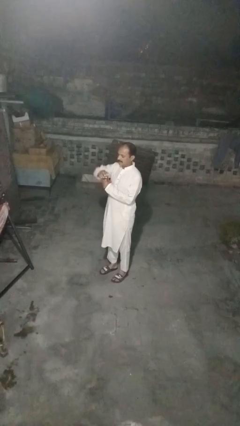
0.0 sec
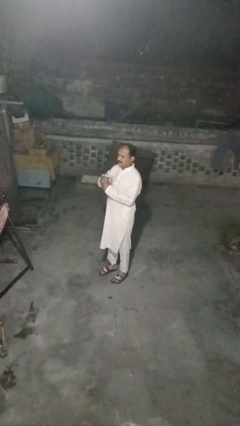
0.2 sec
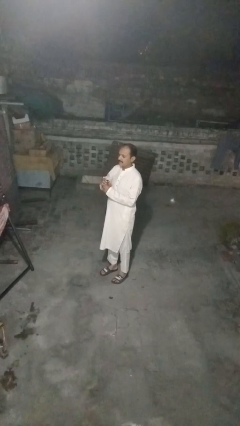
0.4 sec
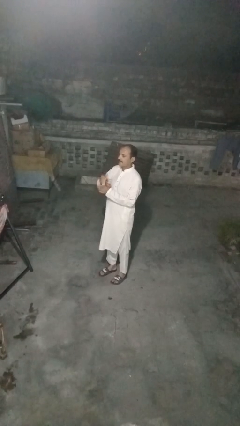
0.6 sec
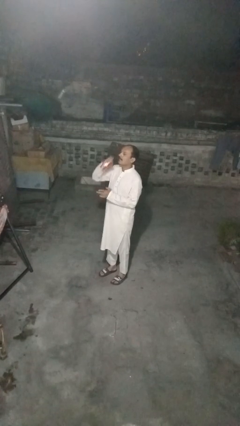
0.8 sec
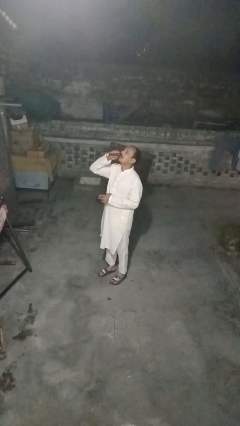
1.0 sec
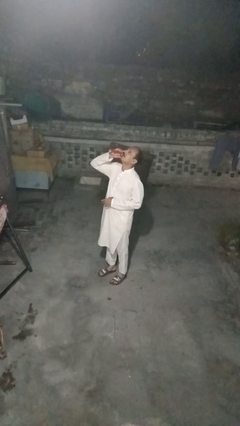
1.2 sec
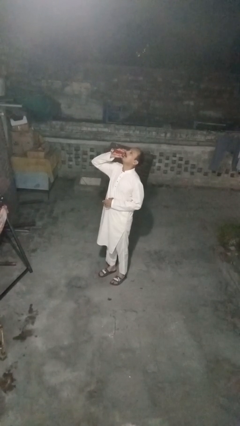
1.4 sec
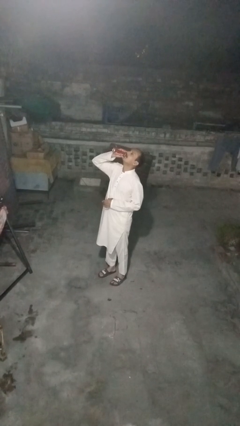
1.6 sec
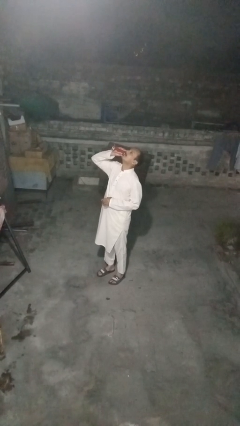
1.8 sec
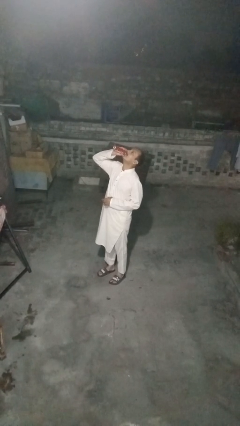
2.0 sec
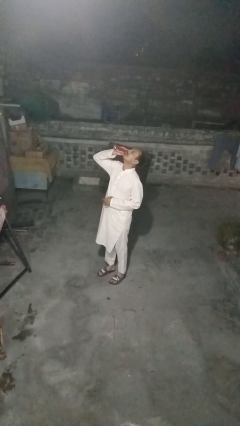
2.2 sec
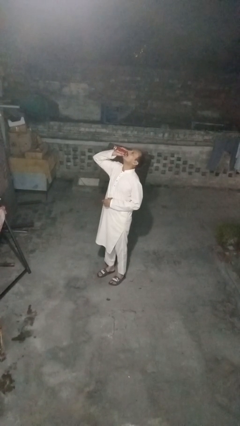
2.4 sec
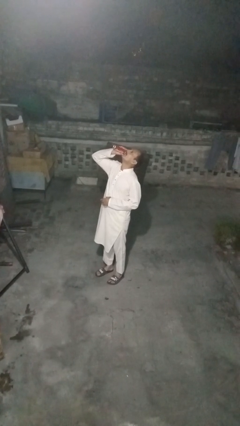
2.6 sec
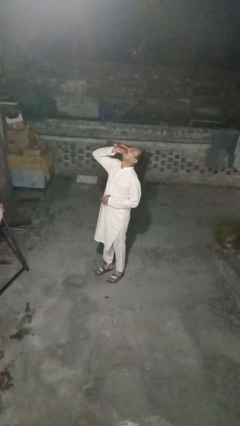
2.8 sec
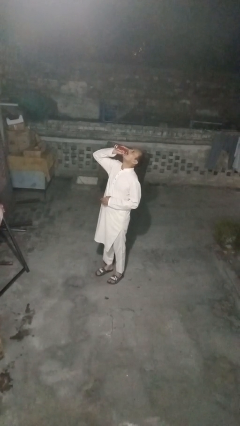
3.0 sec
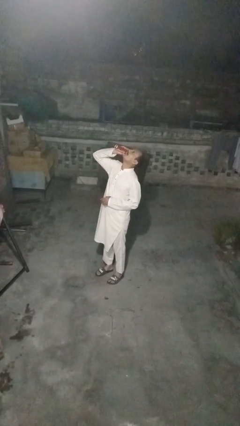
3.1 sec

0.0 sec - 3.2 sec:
person drinks from beverage can

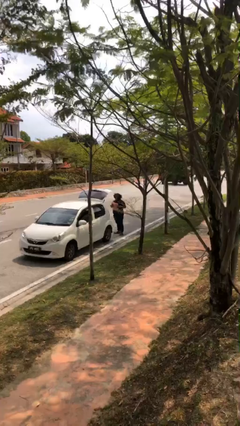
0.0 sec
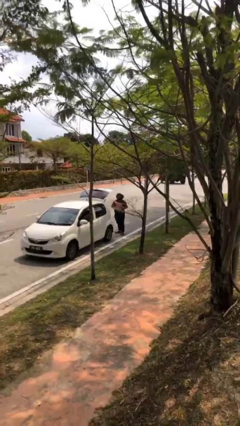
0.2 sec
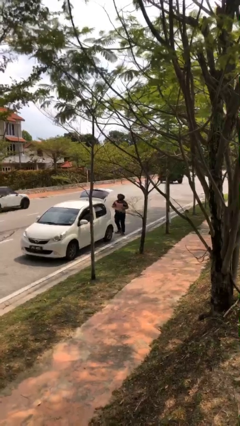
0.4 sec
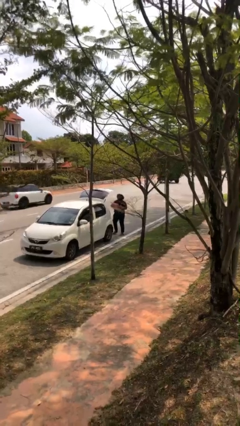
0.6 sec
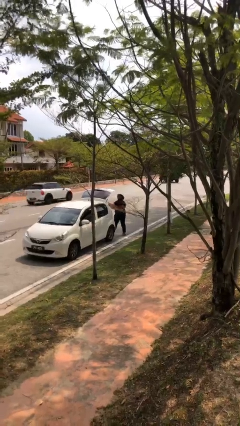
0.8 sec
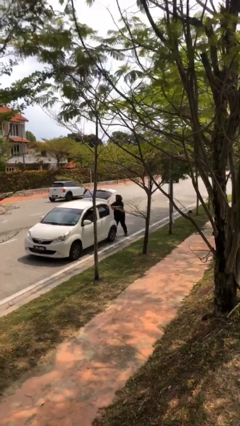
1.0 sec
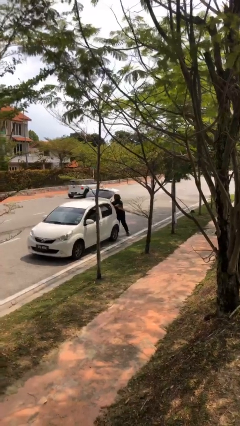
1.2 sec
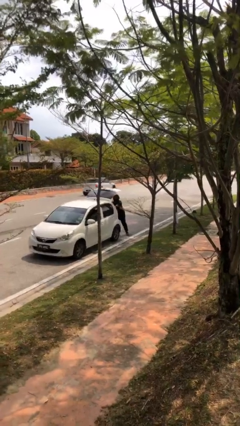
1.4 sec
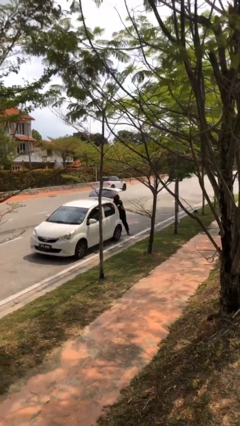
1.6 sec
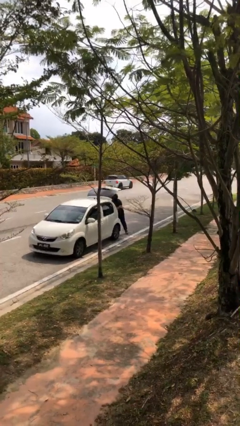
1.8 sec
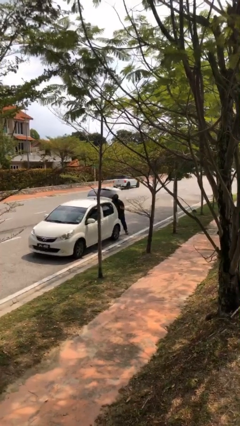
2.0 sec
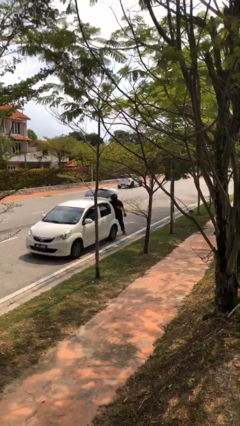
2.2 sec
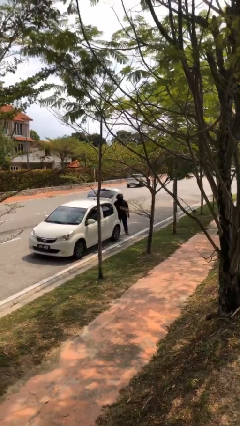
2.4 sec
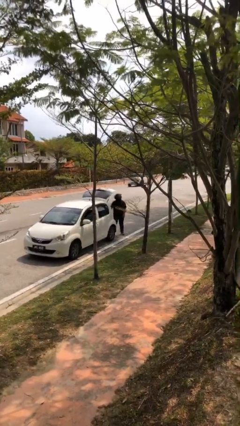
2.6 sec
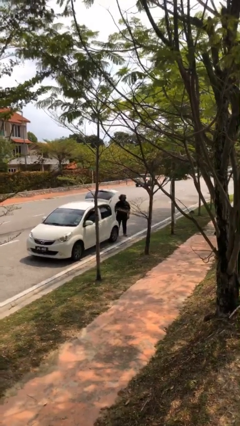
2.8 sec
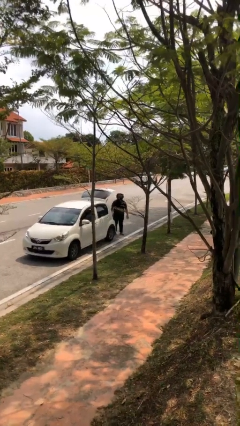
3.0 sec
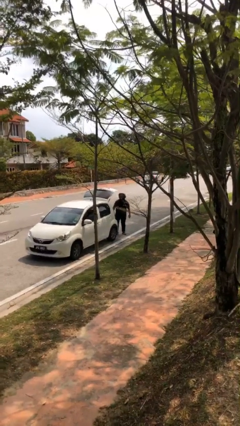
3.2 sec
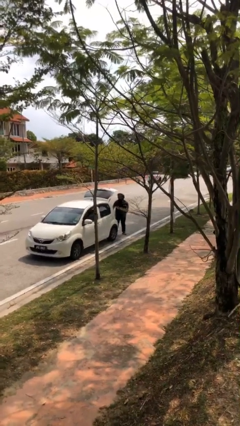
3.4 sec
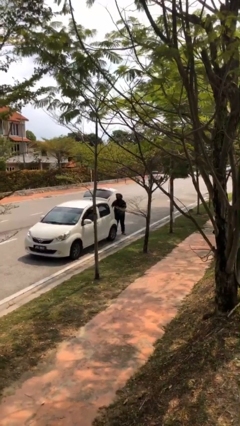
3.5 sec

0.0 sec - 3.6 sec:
person loads car

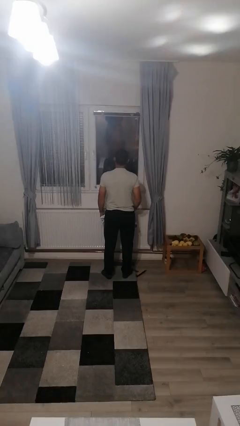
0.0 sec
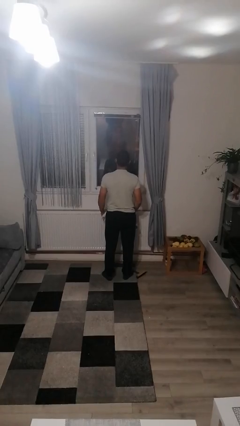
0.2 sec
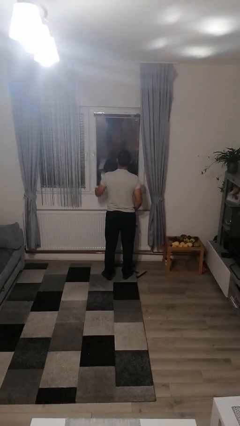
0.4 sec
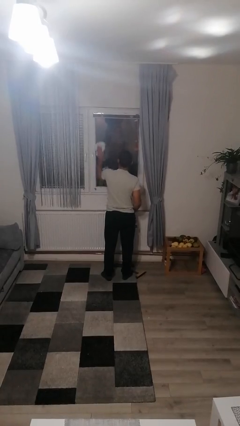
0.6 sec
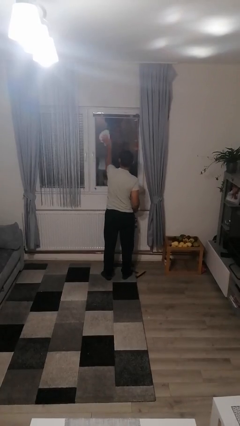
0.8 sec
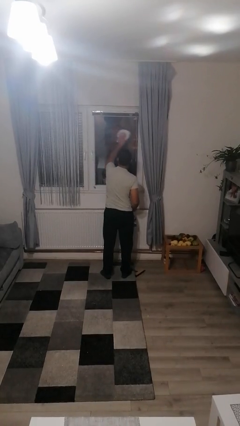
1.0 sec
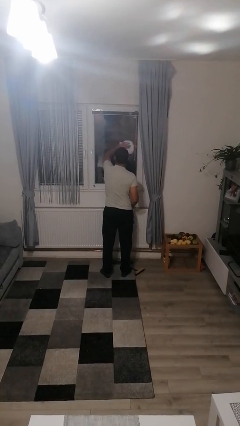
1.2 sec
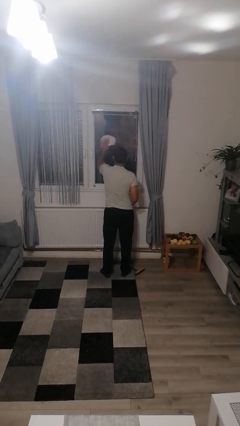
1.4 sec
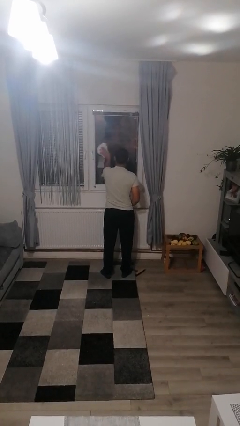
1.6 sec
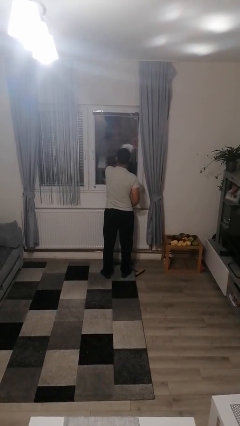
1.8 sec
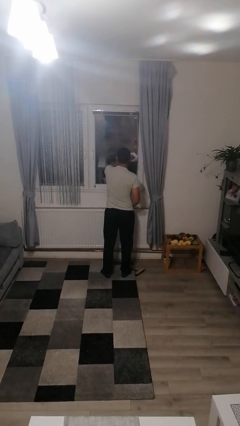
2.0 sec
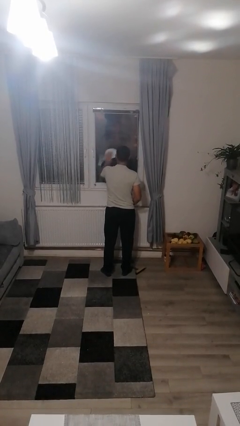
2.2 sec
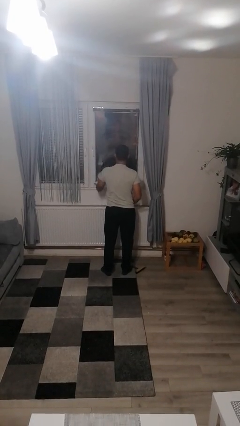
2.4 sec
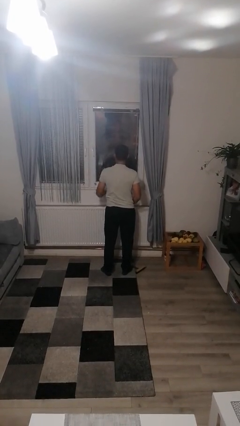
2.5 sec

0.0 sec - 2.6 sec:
person washes window

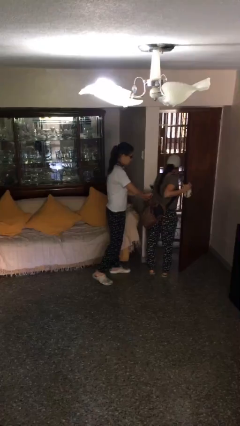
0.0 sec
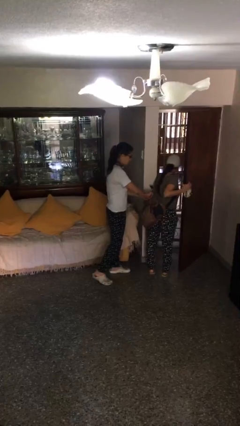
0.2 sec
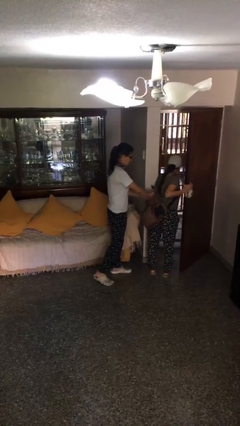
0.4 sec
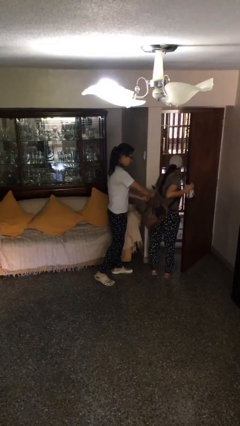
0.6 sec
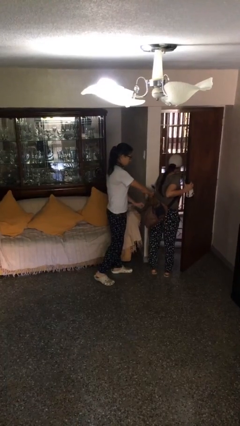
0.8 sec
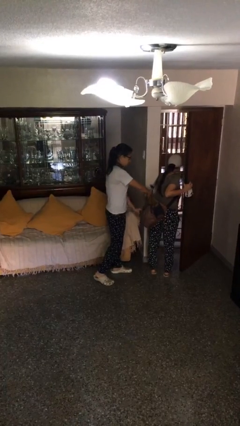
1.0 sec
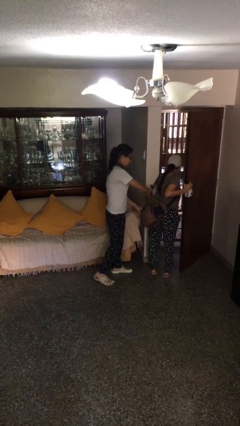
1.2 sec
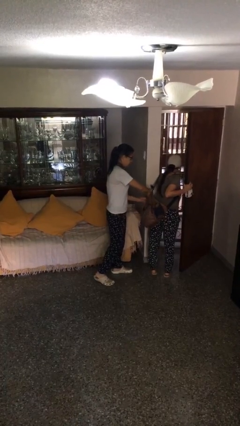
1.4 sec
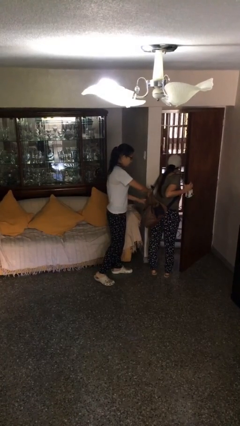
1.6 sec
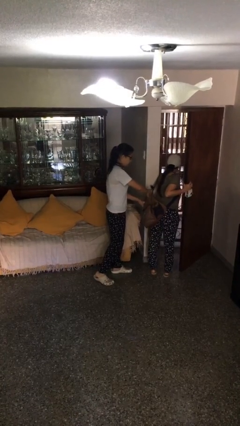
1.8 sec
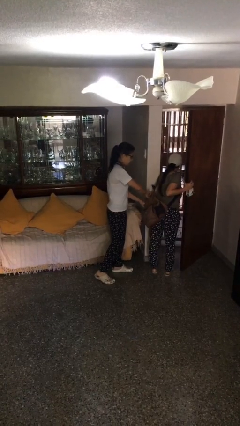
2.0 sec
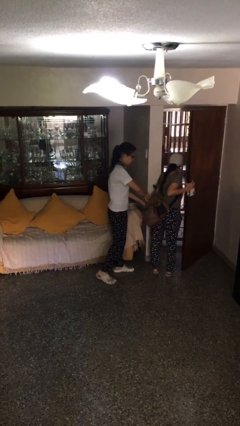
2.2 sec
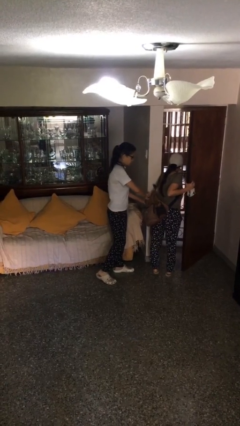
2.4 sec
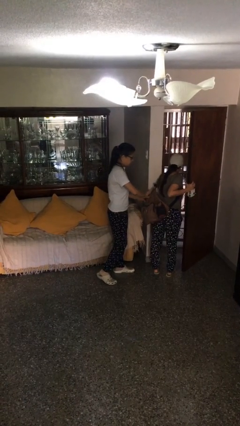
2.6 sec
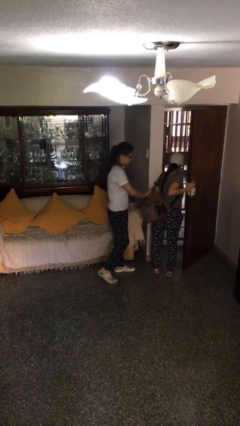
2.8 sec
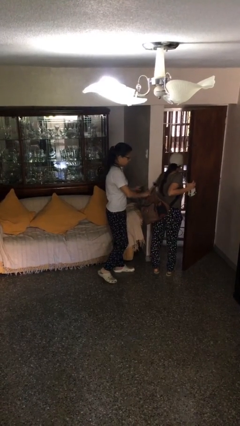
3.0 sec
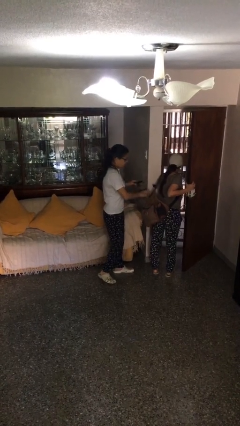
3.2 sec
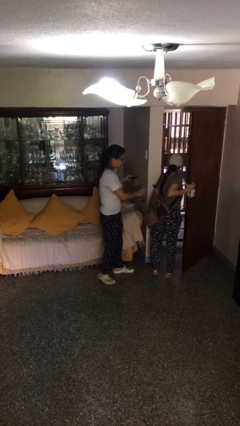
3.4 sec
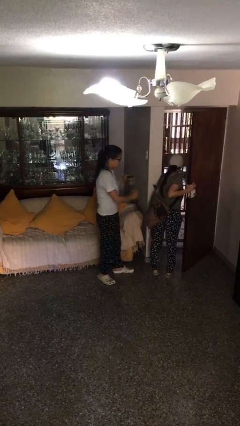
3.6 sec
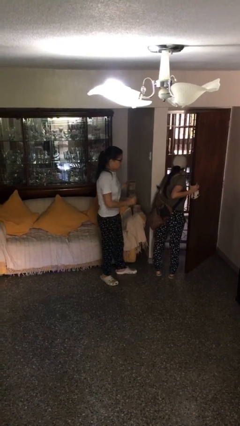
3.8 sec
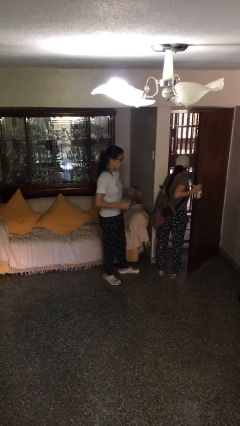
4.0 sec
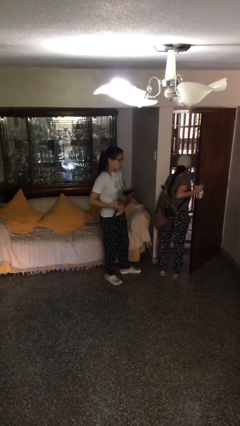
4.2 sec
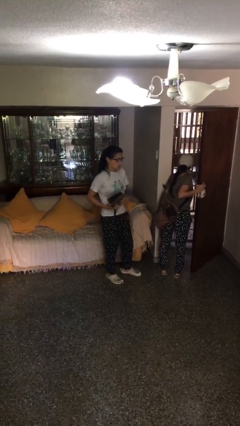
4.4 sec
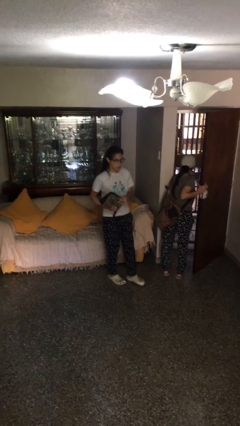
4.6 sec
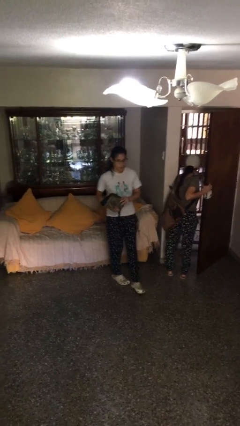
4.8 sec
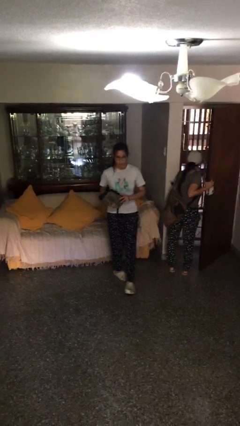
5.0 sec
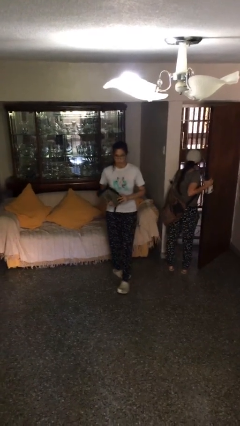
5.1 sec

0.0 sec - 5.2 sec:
person steals object from person

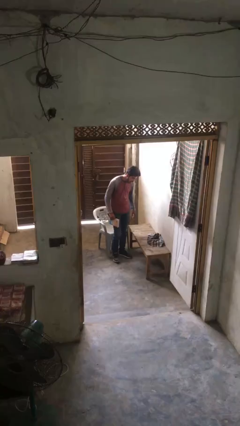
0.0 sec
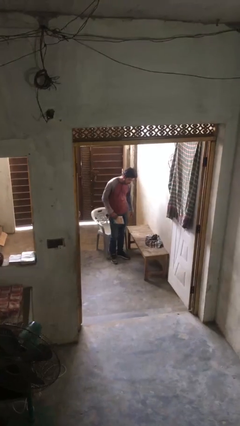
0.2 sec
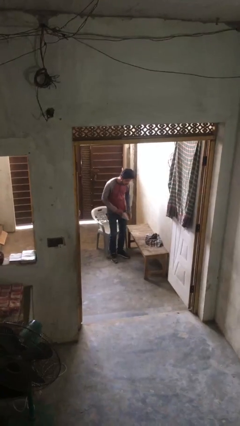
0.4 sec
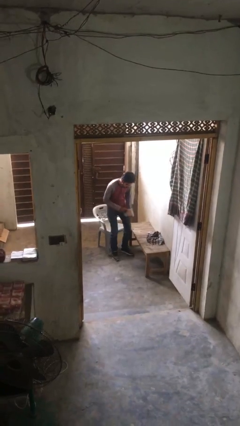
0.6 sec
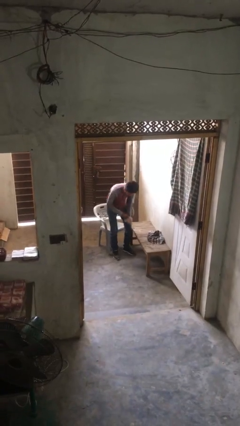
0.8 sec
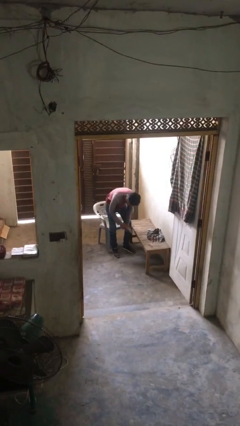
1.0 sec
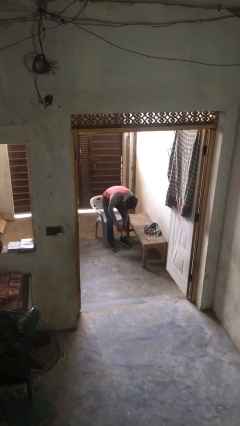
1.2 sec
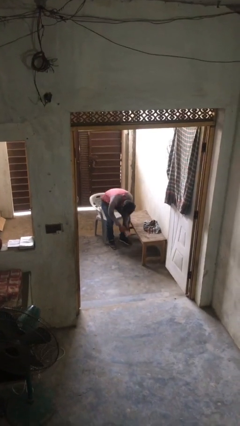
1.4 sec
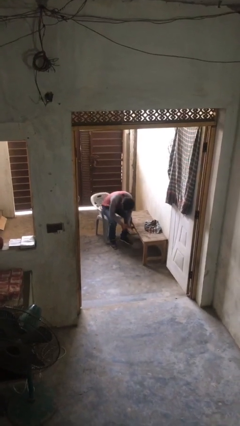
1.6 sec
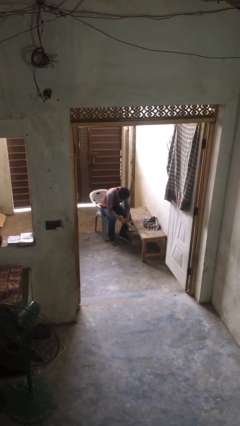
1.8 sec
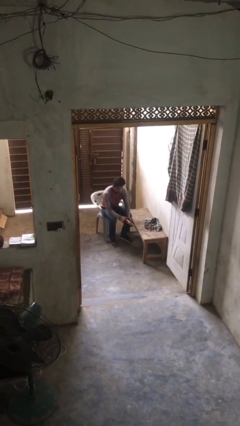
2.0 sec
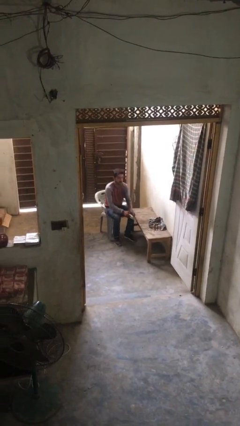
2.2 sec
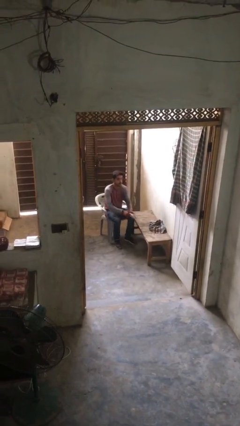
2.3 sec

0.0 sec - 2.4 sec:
person sits down
